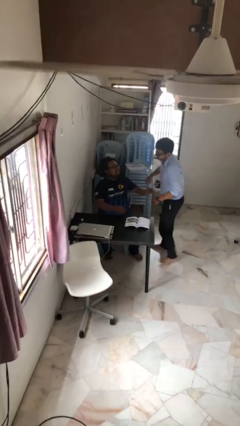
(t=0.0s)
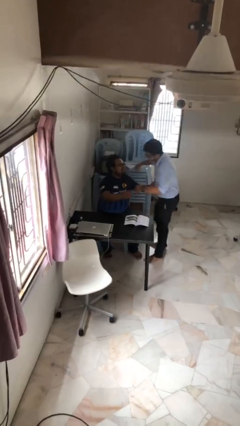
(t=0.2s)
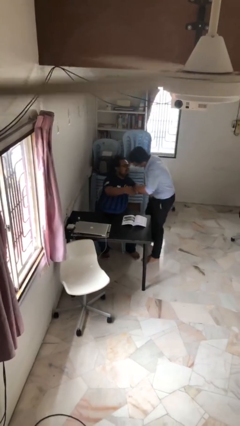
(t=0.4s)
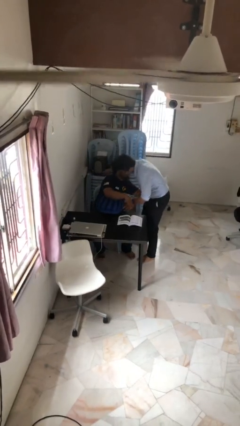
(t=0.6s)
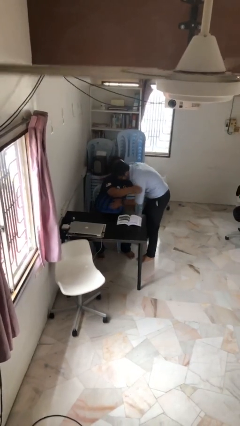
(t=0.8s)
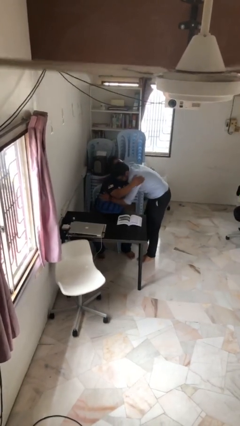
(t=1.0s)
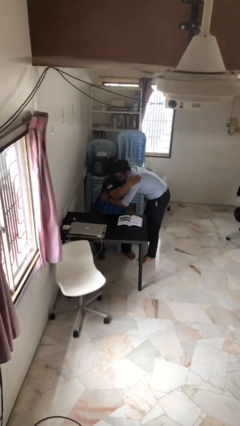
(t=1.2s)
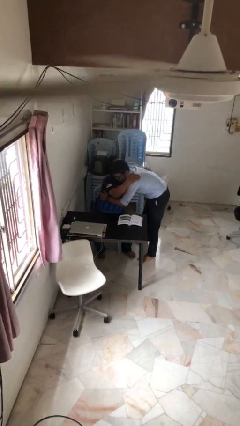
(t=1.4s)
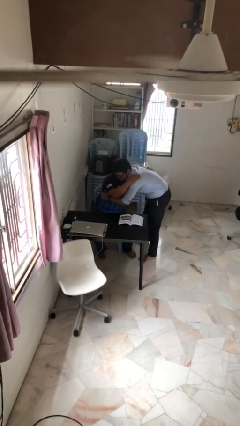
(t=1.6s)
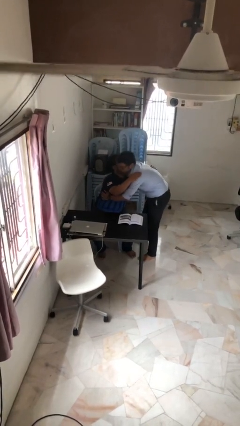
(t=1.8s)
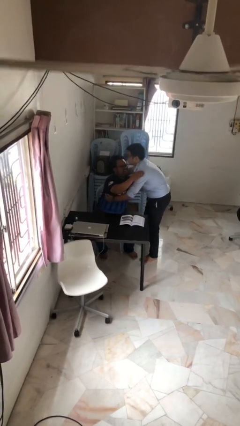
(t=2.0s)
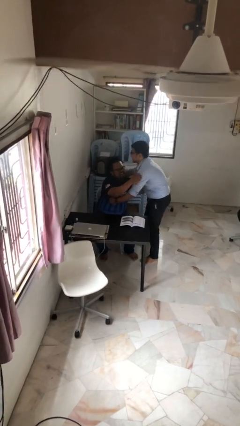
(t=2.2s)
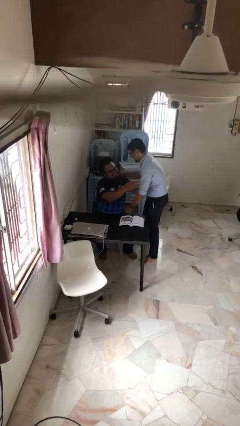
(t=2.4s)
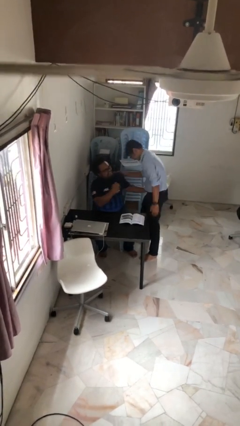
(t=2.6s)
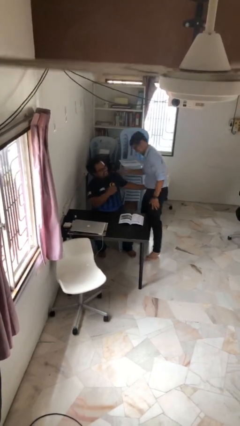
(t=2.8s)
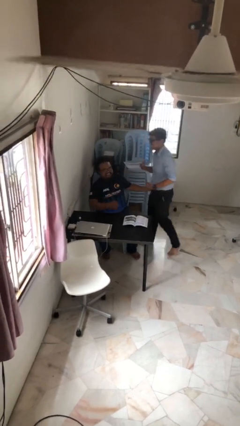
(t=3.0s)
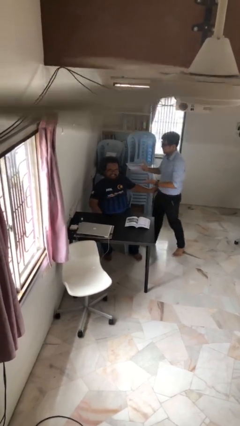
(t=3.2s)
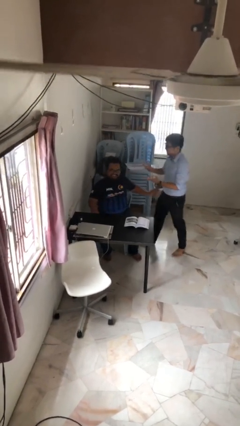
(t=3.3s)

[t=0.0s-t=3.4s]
person embraces person

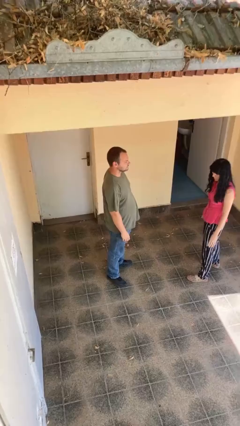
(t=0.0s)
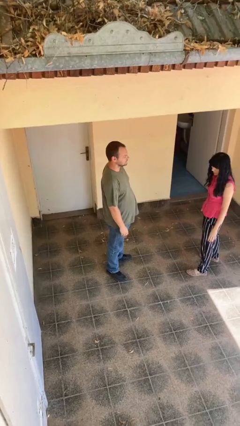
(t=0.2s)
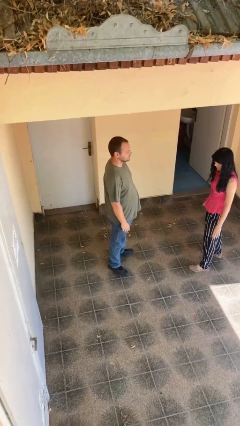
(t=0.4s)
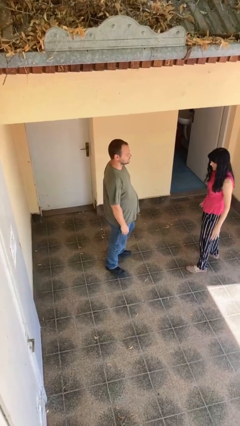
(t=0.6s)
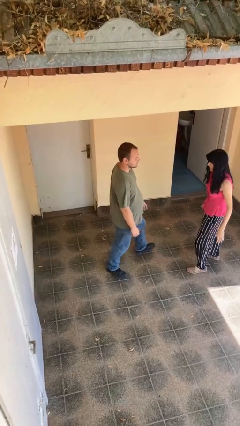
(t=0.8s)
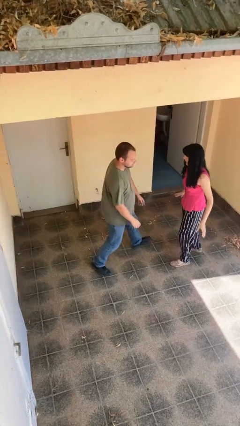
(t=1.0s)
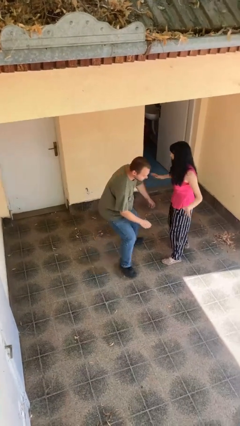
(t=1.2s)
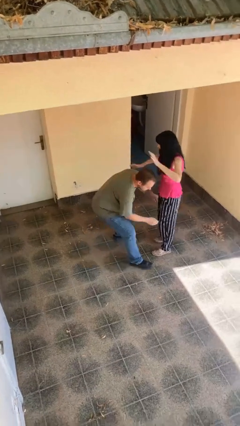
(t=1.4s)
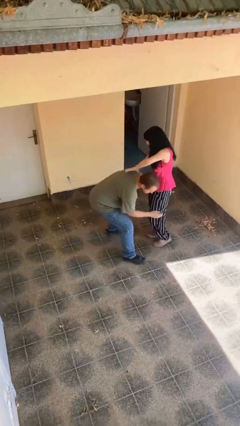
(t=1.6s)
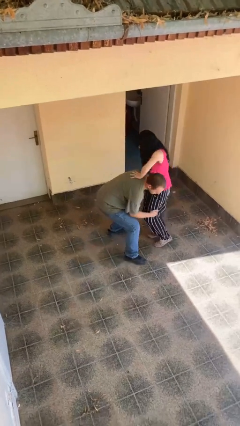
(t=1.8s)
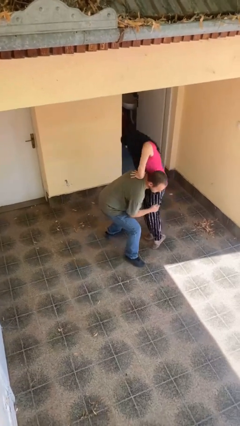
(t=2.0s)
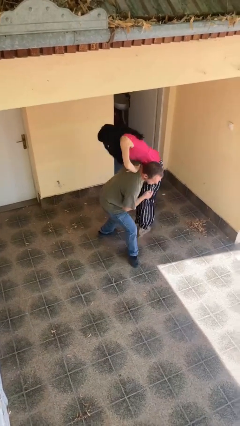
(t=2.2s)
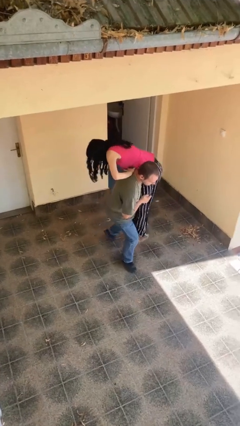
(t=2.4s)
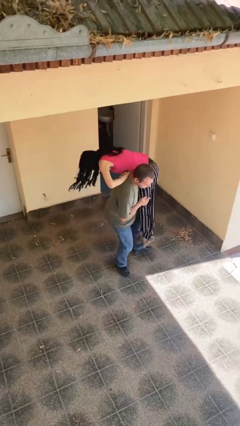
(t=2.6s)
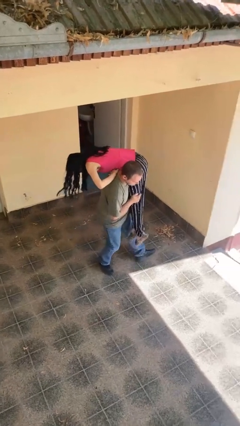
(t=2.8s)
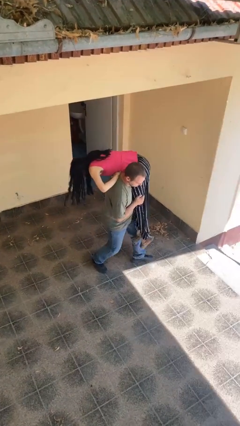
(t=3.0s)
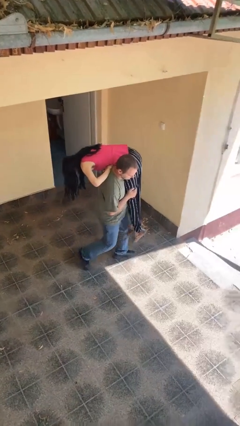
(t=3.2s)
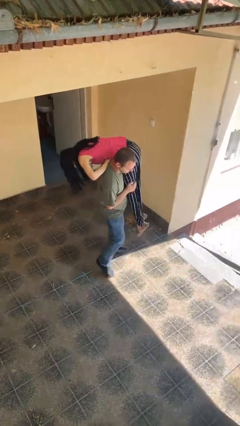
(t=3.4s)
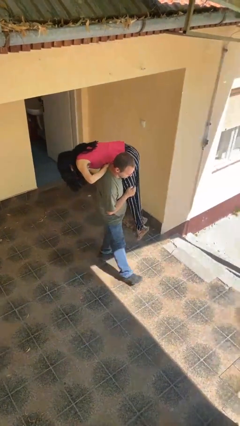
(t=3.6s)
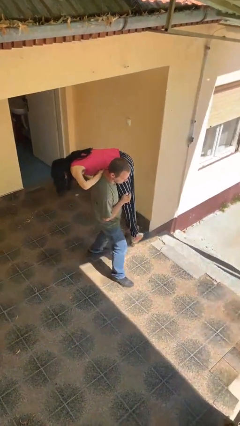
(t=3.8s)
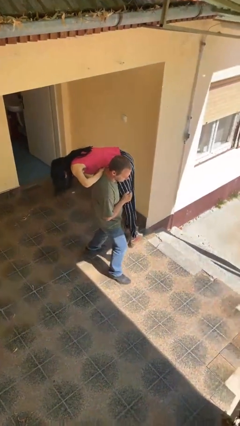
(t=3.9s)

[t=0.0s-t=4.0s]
person carries person over shoulder

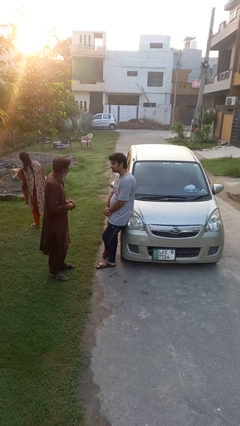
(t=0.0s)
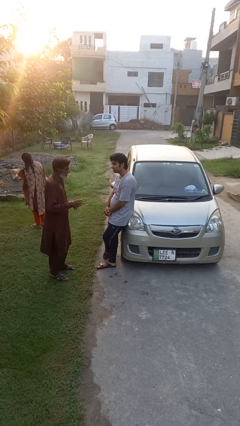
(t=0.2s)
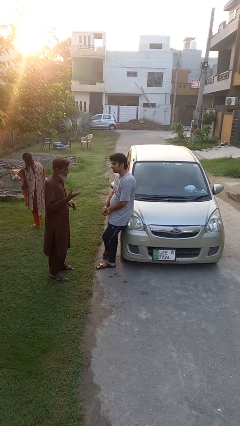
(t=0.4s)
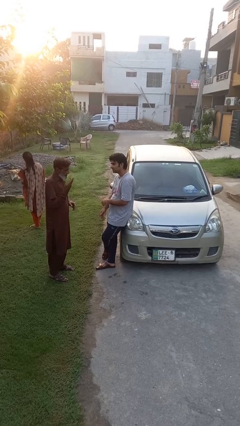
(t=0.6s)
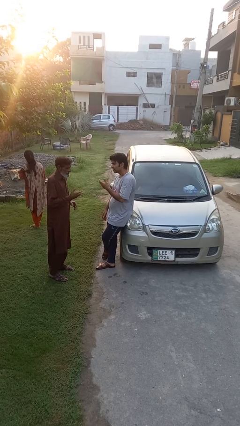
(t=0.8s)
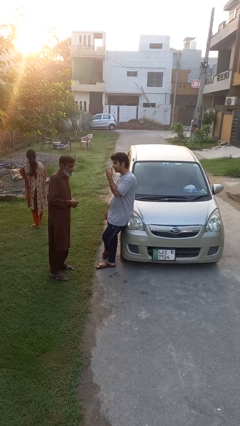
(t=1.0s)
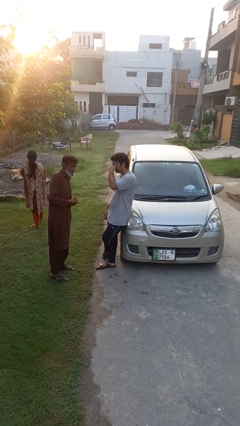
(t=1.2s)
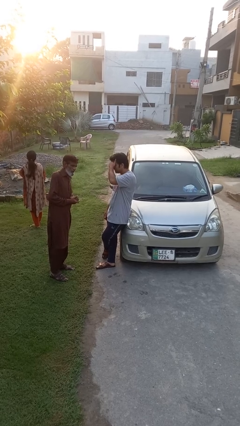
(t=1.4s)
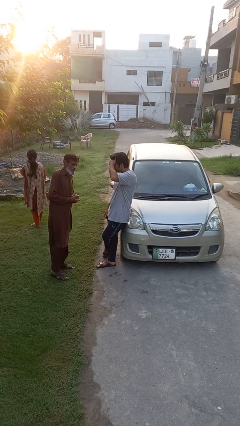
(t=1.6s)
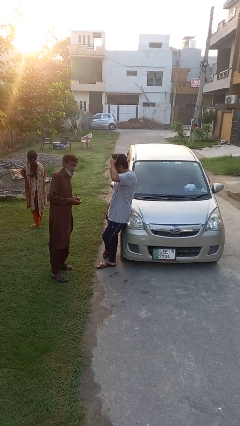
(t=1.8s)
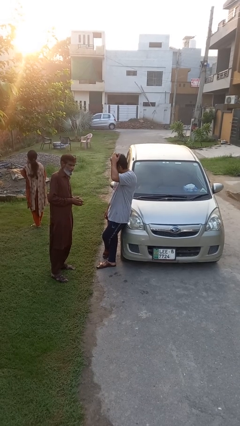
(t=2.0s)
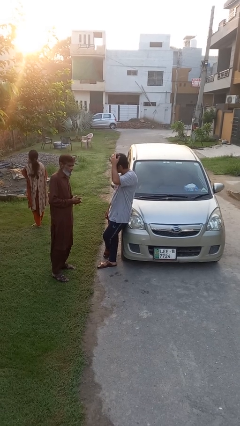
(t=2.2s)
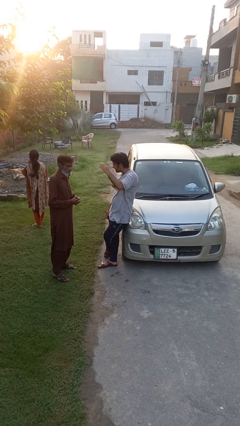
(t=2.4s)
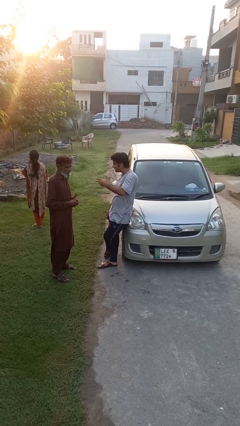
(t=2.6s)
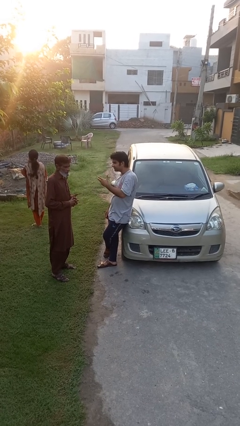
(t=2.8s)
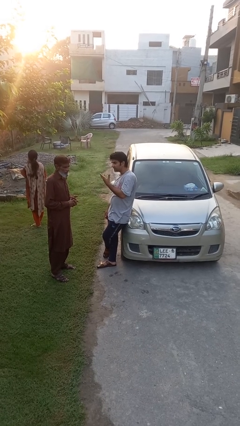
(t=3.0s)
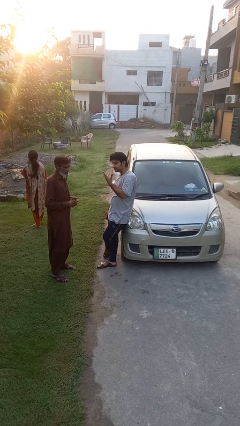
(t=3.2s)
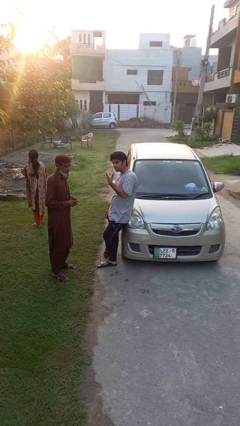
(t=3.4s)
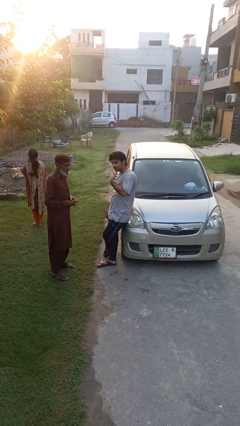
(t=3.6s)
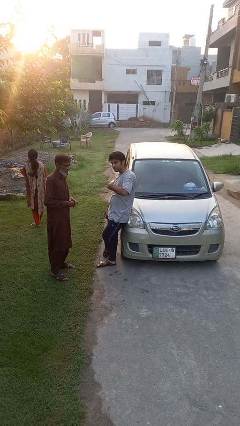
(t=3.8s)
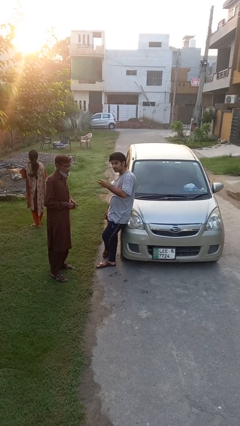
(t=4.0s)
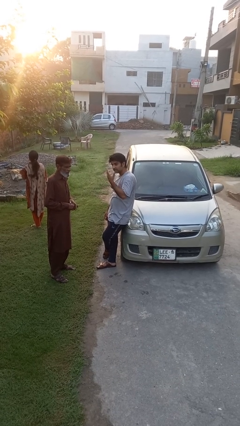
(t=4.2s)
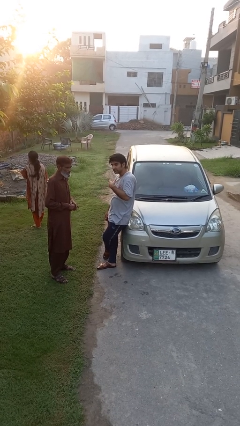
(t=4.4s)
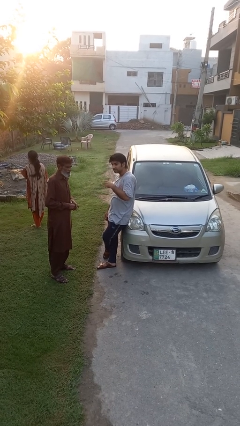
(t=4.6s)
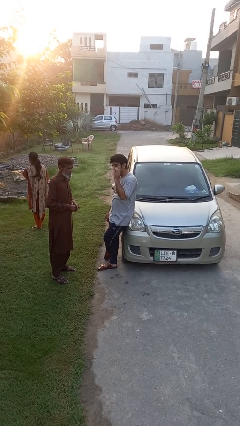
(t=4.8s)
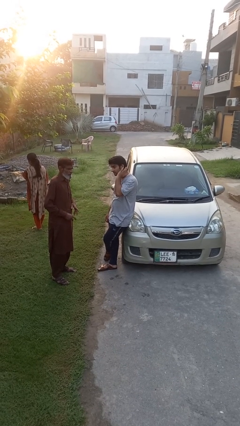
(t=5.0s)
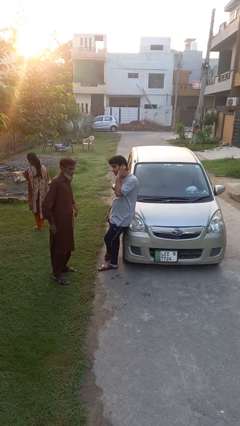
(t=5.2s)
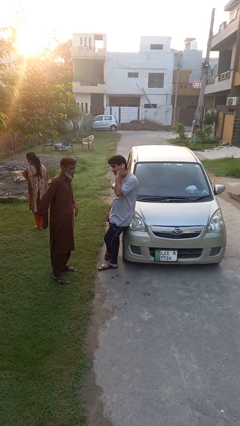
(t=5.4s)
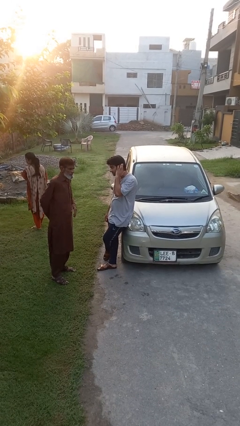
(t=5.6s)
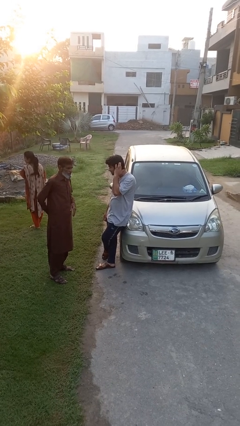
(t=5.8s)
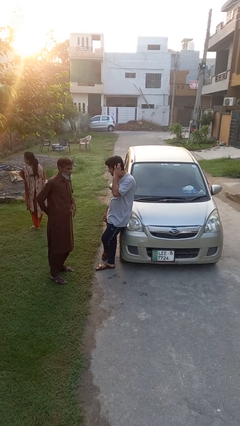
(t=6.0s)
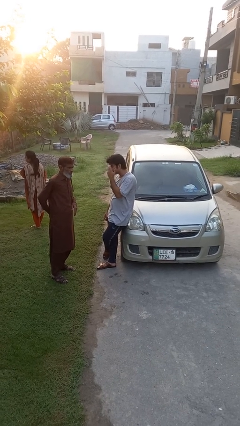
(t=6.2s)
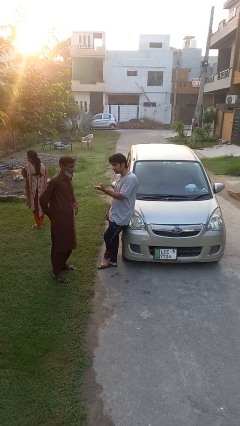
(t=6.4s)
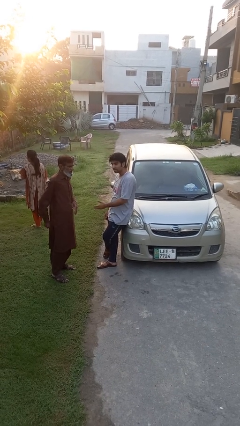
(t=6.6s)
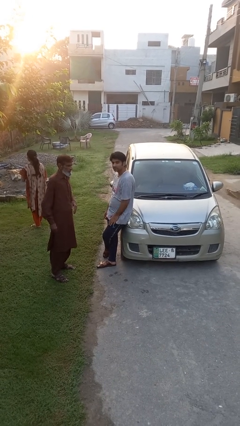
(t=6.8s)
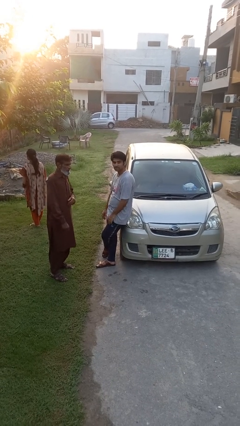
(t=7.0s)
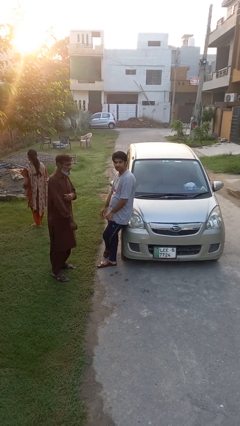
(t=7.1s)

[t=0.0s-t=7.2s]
person talks to person

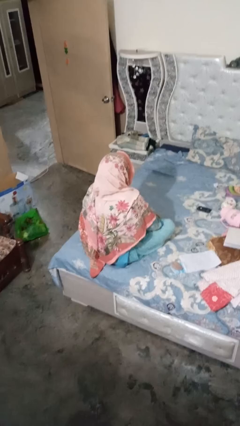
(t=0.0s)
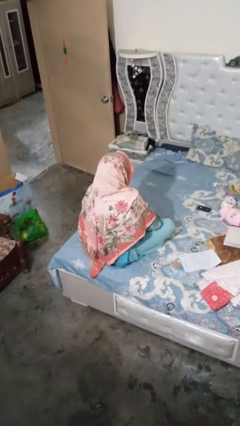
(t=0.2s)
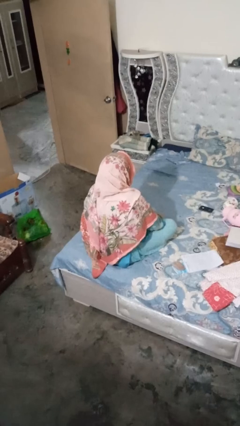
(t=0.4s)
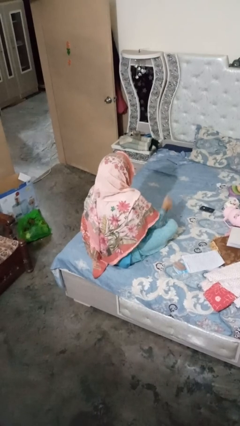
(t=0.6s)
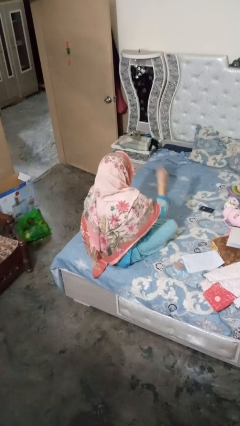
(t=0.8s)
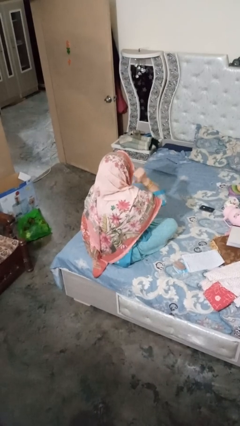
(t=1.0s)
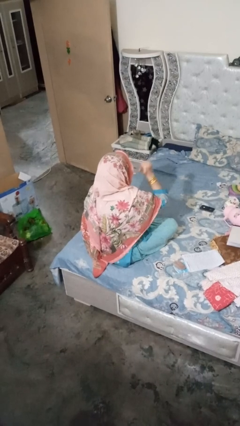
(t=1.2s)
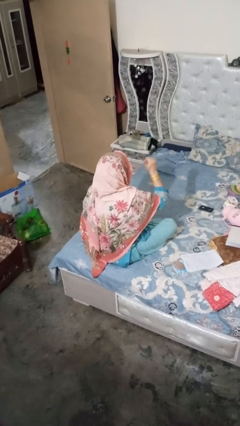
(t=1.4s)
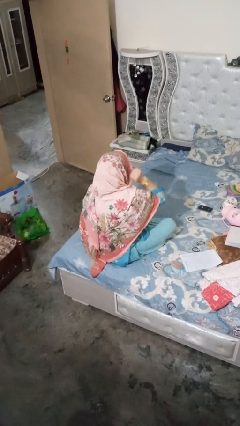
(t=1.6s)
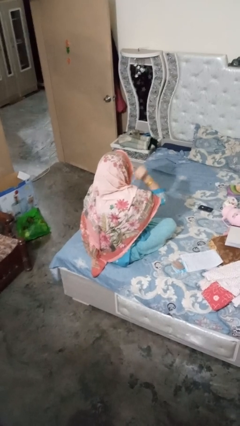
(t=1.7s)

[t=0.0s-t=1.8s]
person gestures behind me

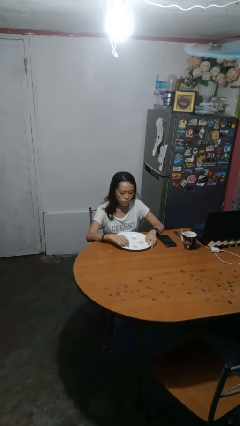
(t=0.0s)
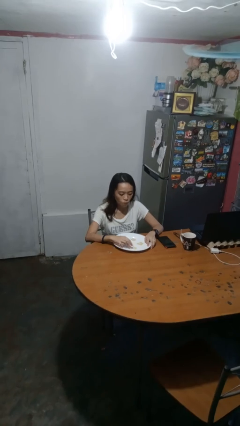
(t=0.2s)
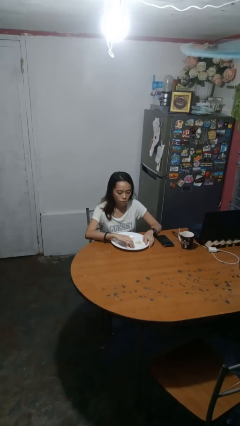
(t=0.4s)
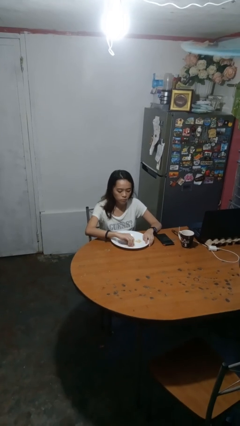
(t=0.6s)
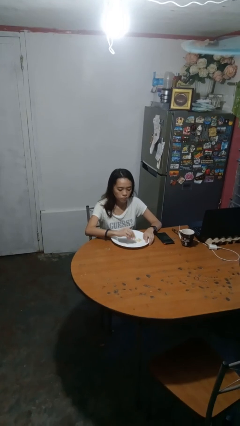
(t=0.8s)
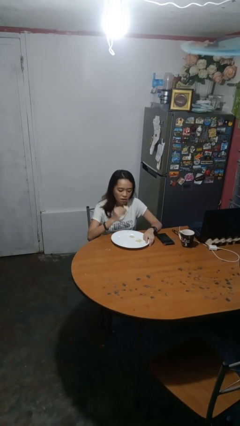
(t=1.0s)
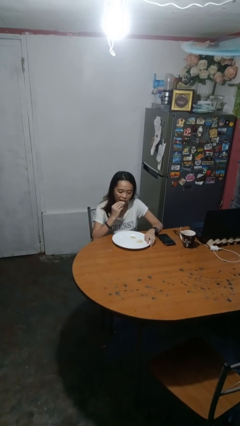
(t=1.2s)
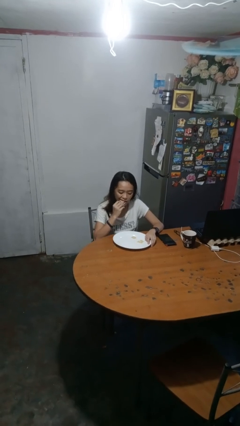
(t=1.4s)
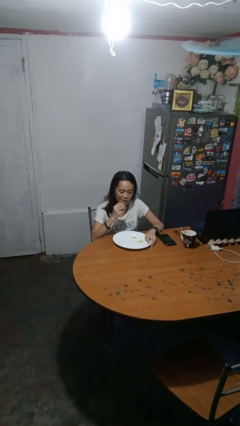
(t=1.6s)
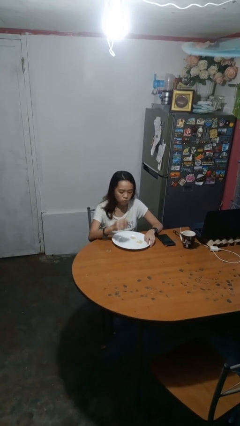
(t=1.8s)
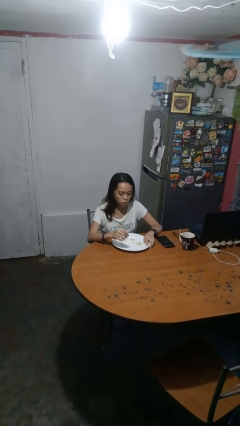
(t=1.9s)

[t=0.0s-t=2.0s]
person eats with hands
